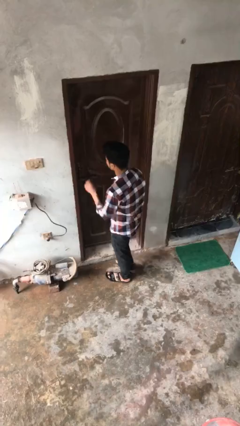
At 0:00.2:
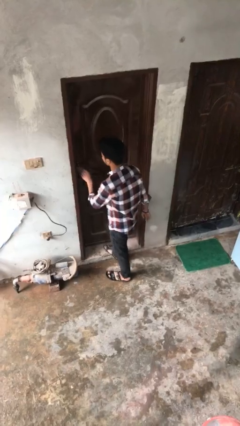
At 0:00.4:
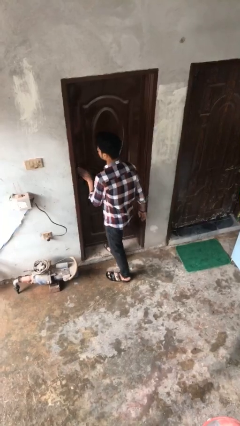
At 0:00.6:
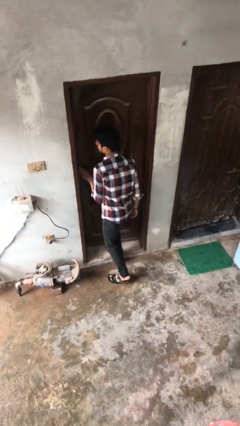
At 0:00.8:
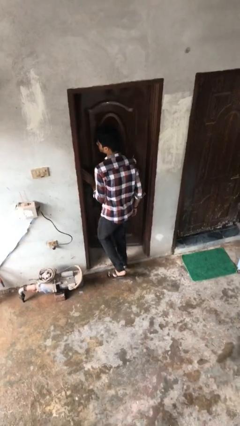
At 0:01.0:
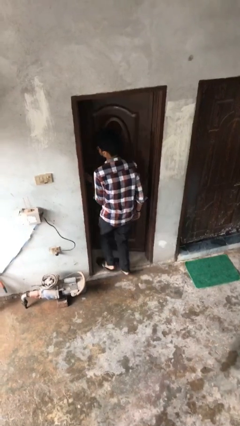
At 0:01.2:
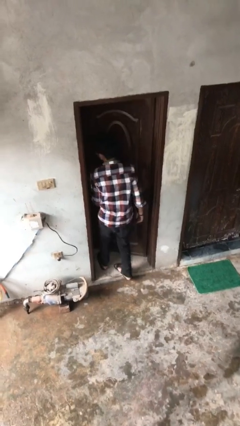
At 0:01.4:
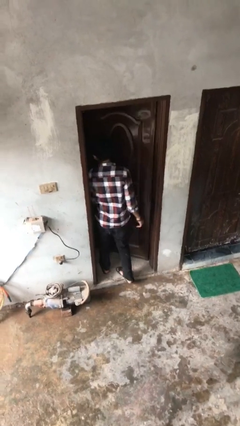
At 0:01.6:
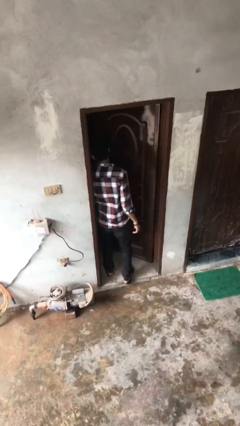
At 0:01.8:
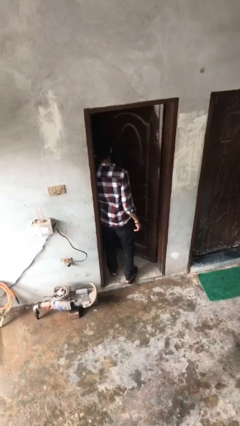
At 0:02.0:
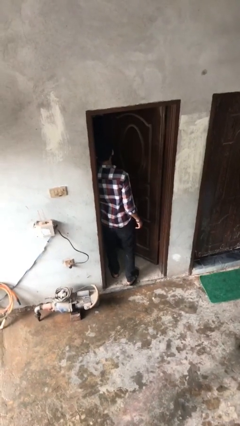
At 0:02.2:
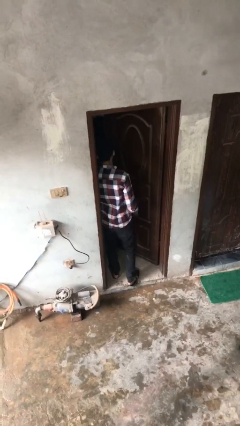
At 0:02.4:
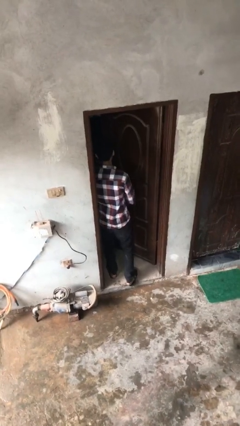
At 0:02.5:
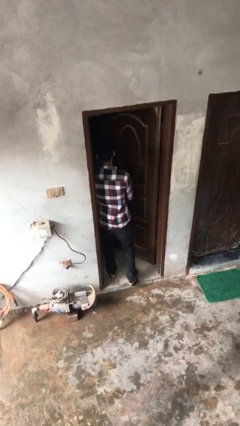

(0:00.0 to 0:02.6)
person opens facility door

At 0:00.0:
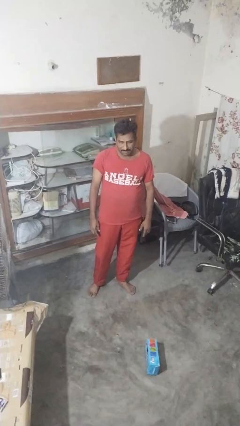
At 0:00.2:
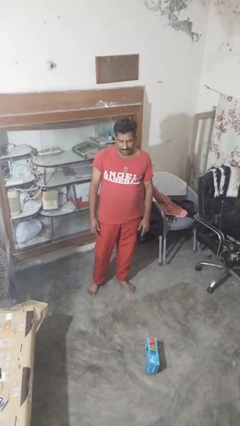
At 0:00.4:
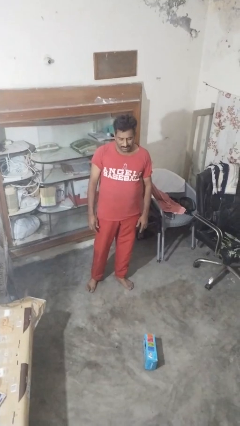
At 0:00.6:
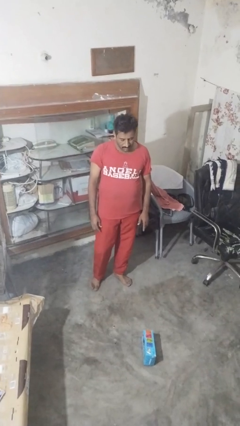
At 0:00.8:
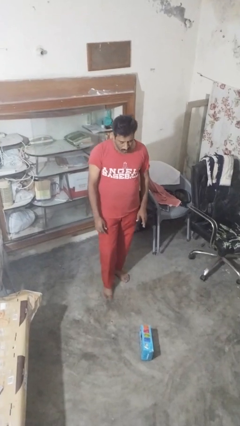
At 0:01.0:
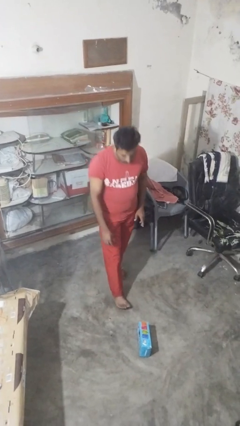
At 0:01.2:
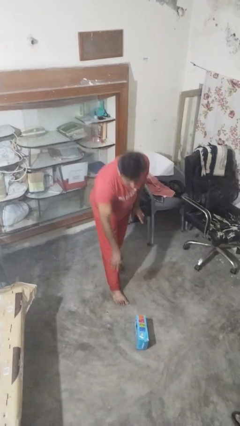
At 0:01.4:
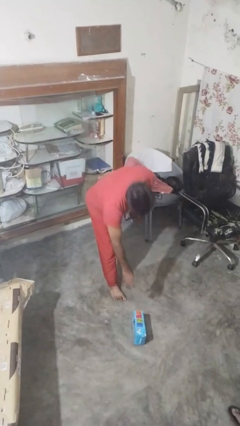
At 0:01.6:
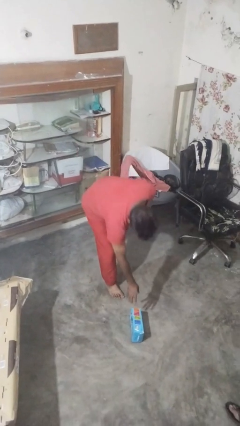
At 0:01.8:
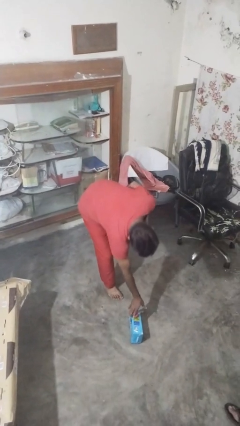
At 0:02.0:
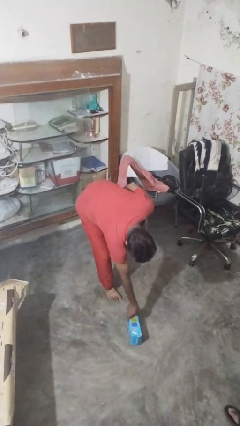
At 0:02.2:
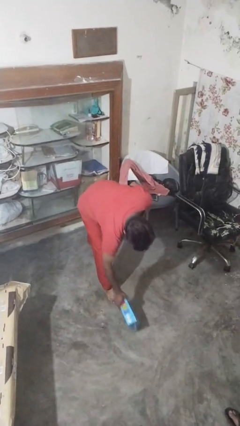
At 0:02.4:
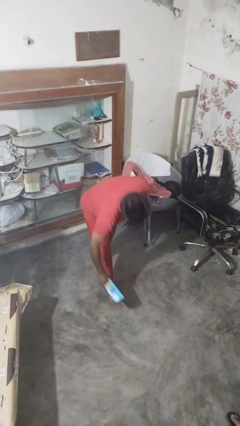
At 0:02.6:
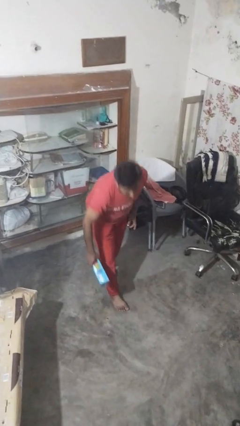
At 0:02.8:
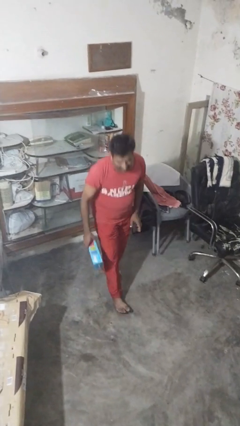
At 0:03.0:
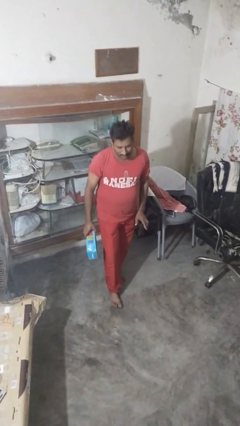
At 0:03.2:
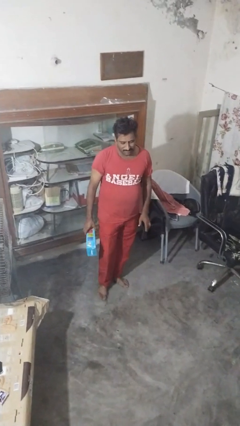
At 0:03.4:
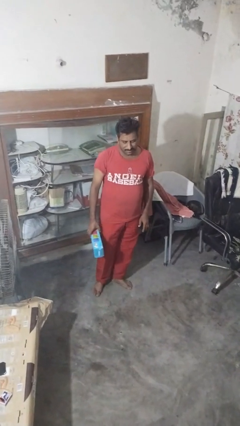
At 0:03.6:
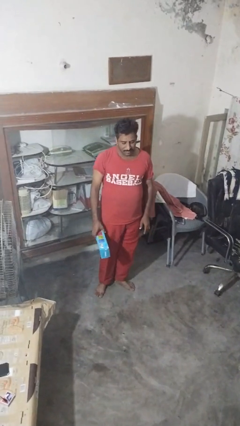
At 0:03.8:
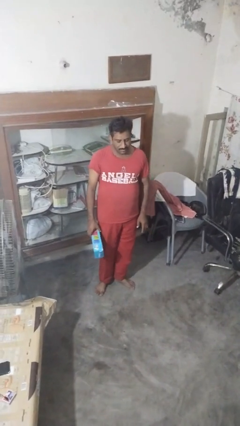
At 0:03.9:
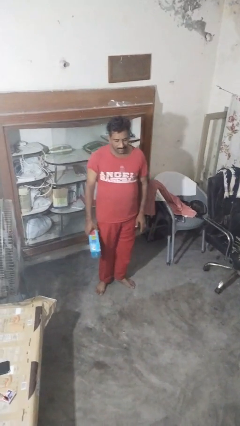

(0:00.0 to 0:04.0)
person picks up object from floor

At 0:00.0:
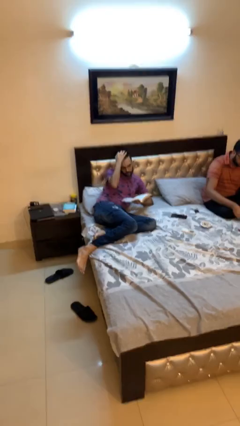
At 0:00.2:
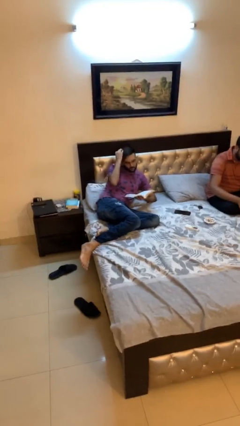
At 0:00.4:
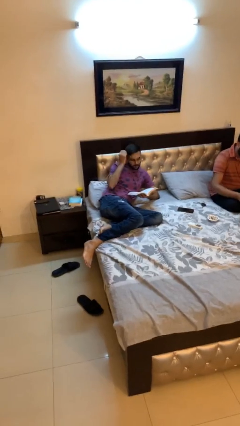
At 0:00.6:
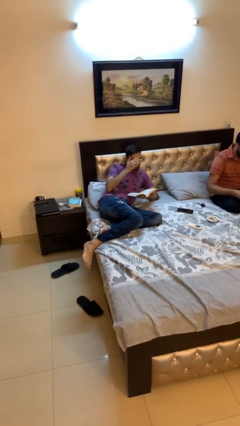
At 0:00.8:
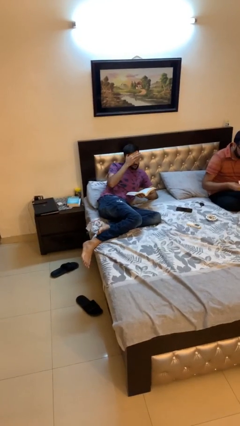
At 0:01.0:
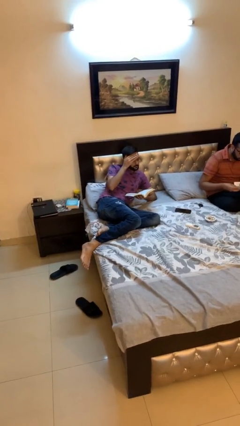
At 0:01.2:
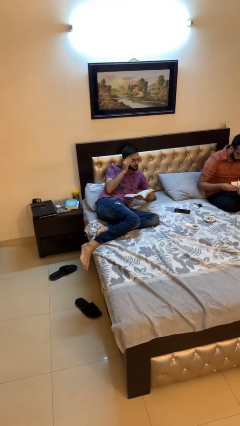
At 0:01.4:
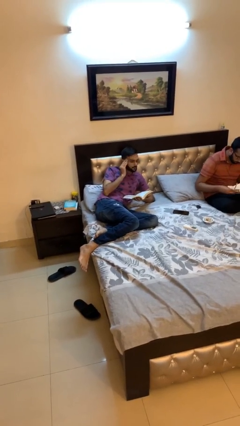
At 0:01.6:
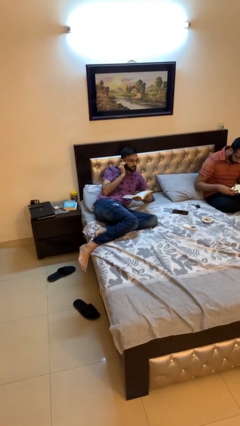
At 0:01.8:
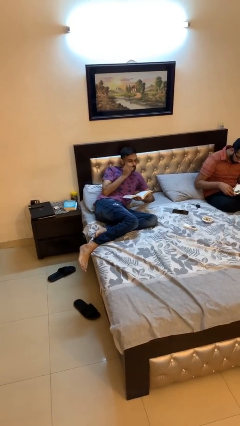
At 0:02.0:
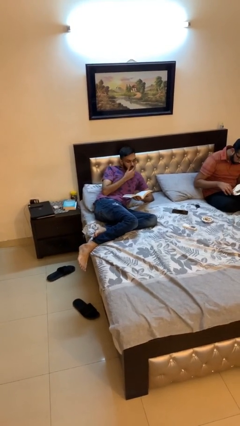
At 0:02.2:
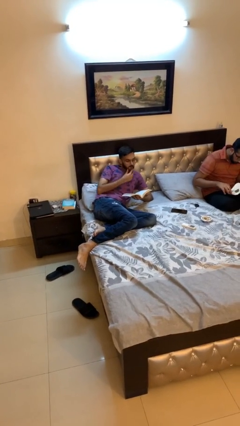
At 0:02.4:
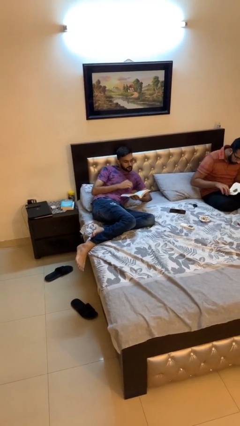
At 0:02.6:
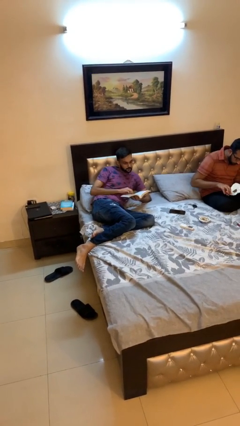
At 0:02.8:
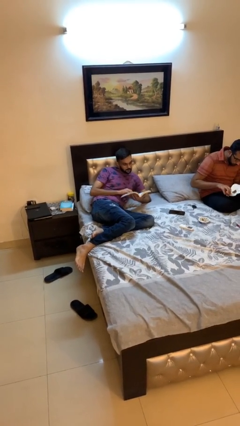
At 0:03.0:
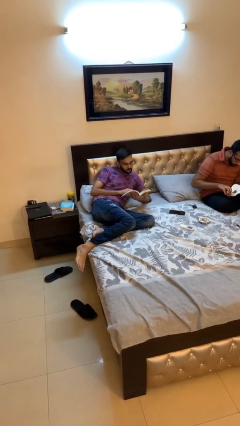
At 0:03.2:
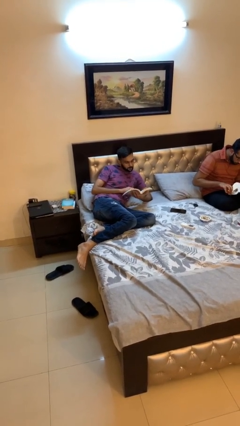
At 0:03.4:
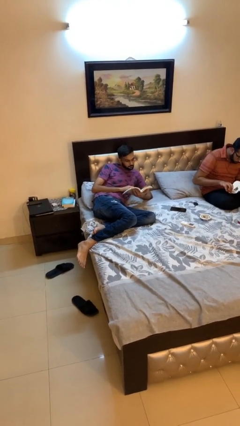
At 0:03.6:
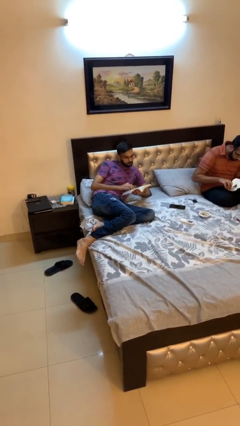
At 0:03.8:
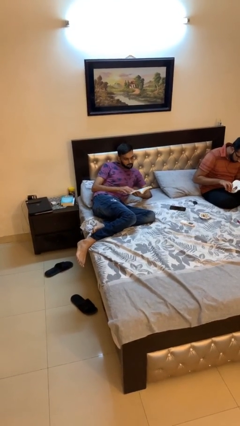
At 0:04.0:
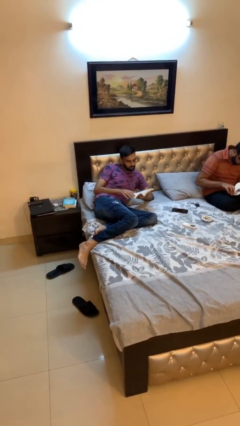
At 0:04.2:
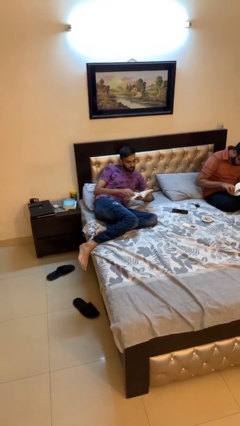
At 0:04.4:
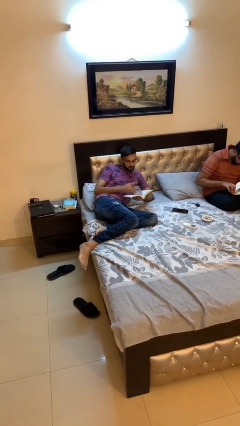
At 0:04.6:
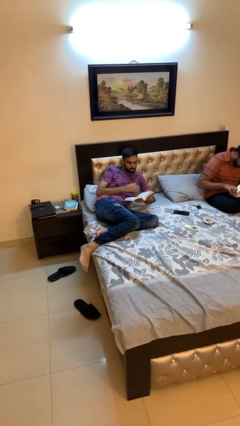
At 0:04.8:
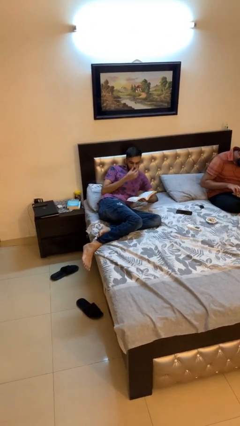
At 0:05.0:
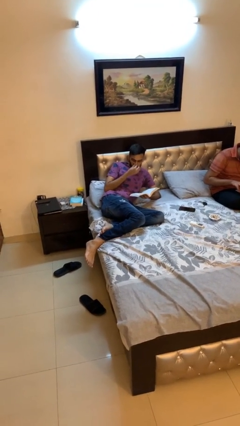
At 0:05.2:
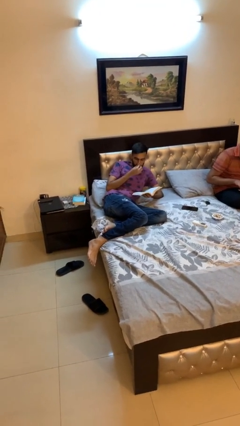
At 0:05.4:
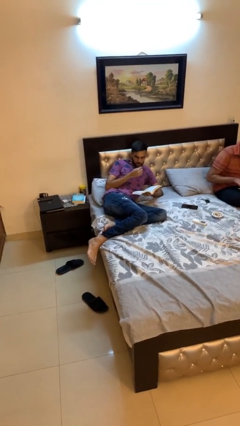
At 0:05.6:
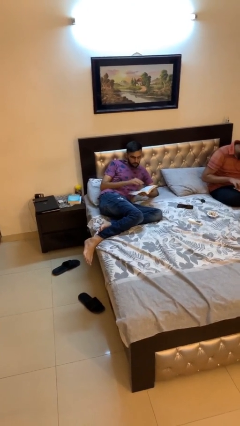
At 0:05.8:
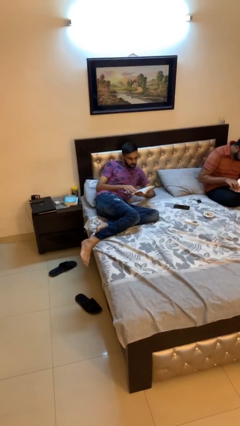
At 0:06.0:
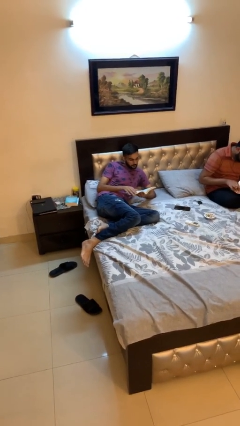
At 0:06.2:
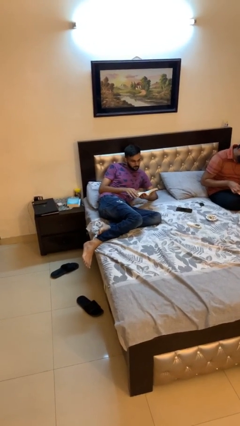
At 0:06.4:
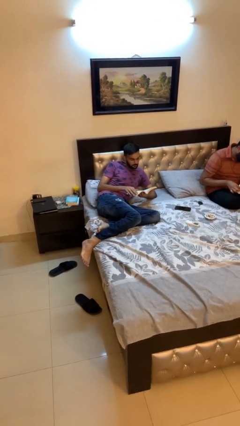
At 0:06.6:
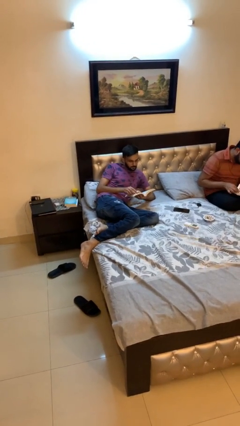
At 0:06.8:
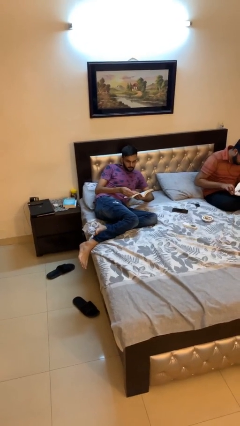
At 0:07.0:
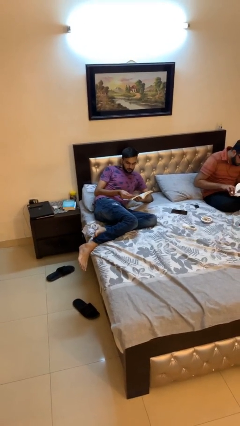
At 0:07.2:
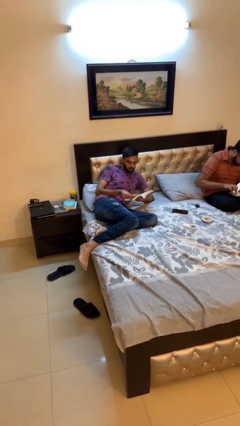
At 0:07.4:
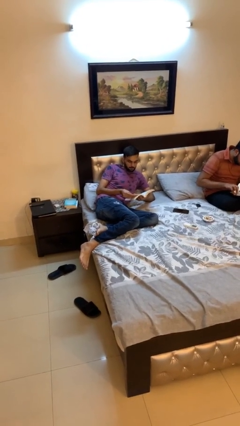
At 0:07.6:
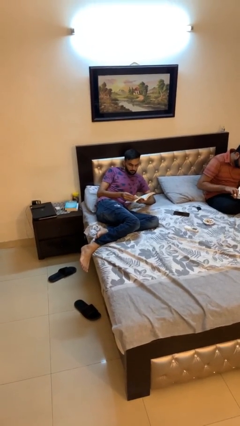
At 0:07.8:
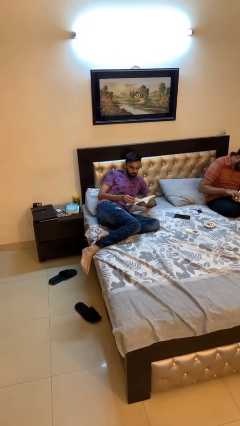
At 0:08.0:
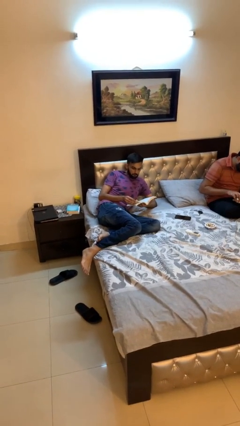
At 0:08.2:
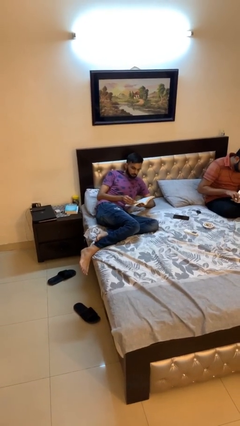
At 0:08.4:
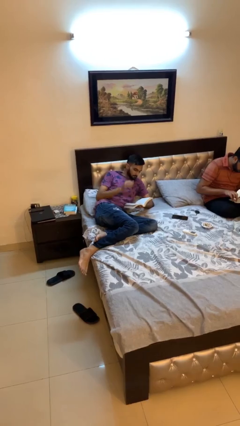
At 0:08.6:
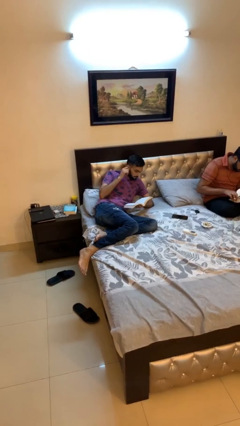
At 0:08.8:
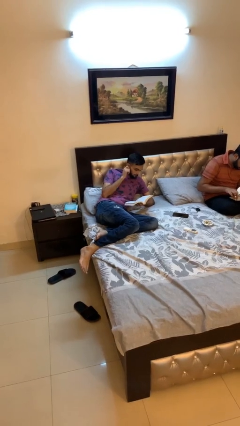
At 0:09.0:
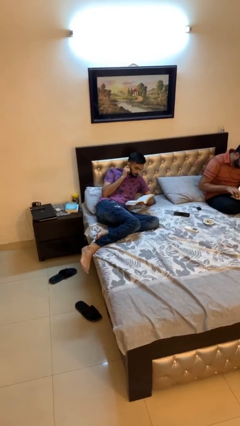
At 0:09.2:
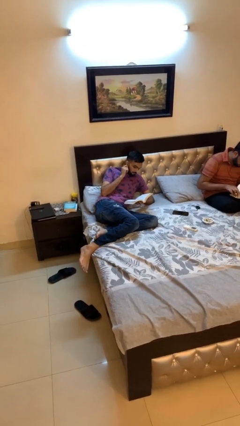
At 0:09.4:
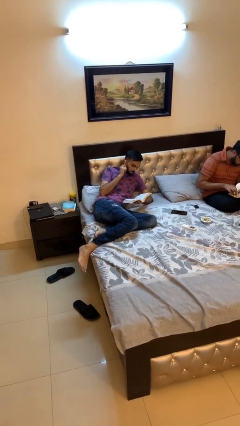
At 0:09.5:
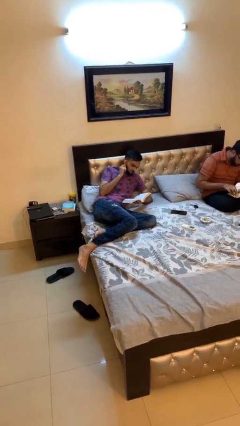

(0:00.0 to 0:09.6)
person reads document

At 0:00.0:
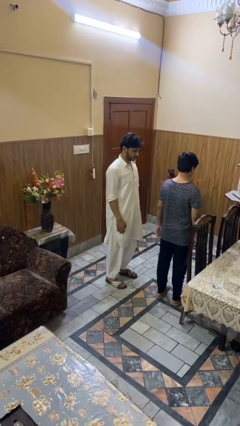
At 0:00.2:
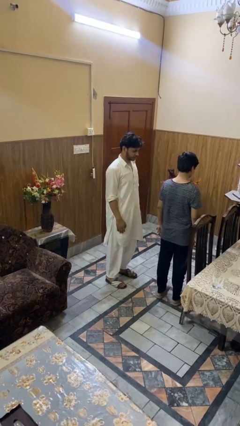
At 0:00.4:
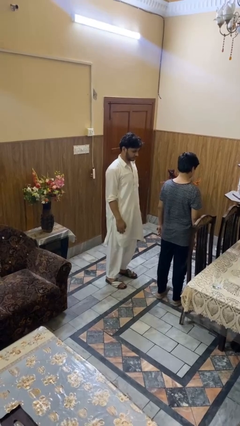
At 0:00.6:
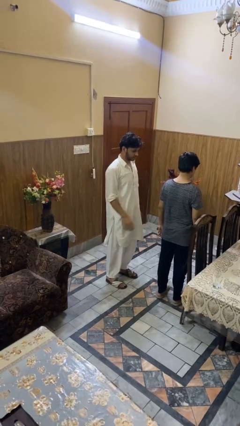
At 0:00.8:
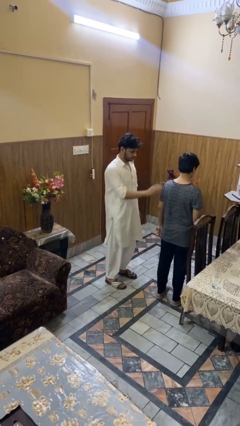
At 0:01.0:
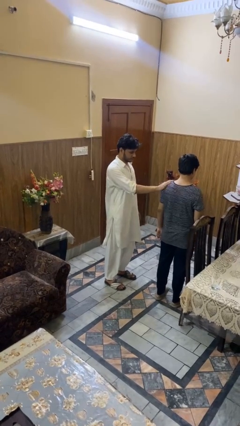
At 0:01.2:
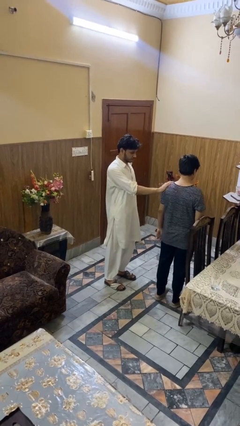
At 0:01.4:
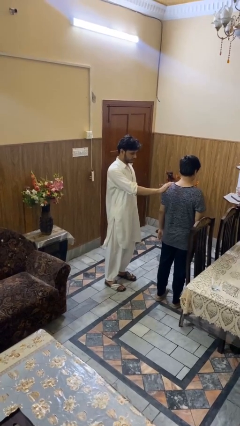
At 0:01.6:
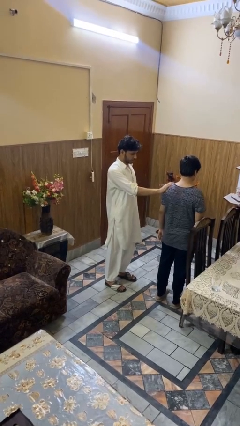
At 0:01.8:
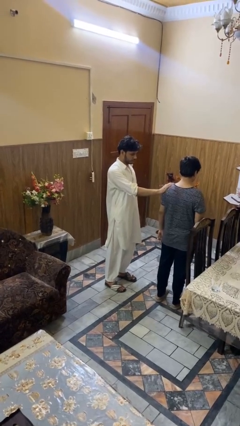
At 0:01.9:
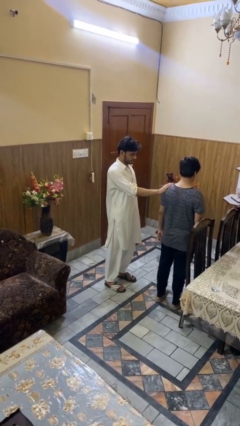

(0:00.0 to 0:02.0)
person grabs person by shoulder
